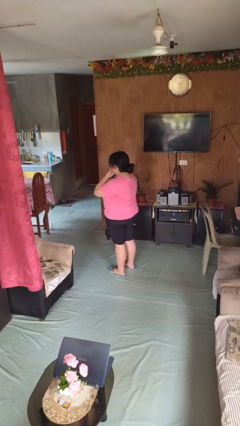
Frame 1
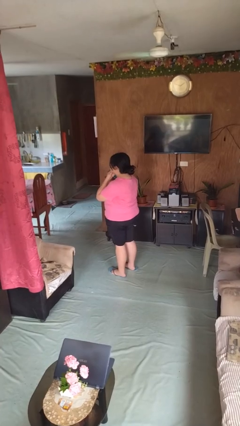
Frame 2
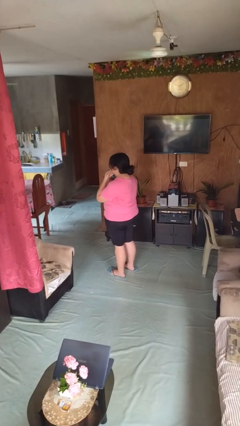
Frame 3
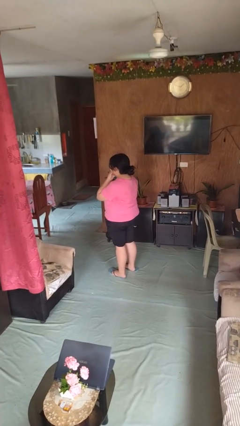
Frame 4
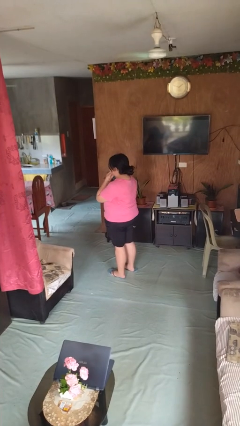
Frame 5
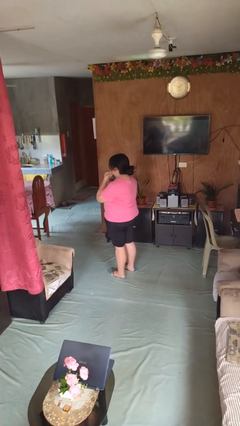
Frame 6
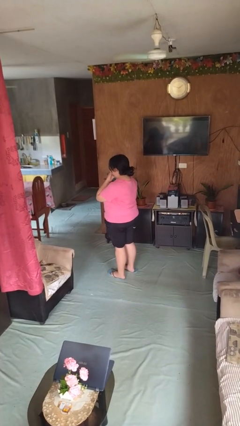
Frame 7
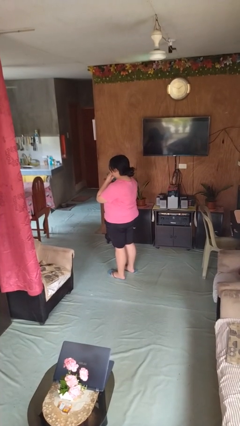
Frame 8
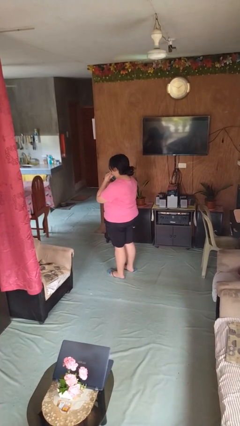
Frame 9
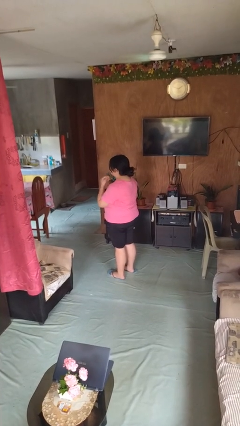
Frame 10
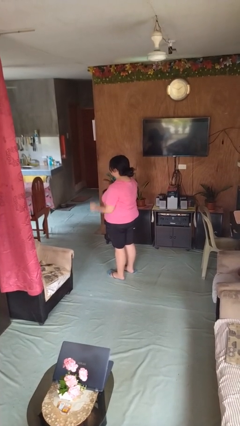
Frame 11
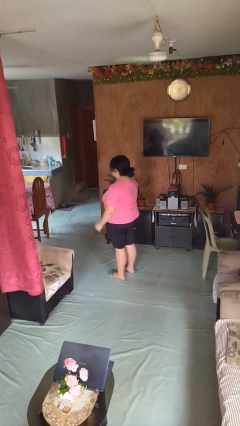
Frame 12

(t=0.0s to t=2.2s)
person strokes chin

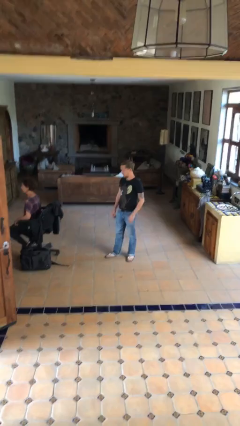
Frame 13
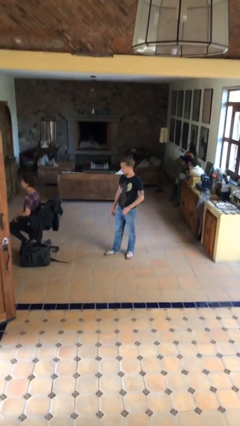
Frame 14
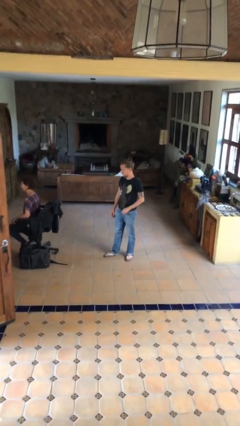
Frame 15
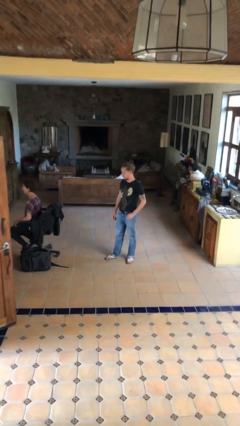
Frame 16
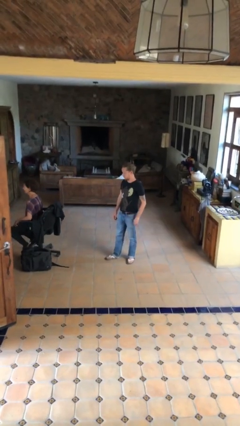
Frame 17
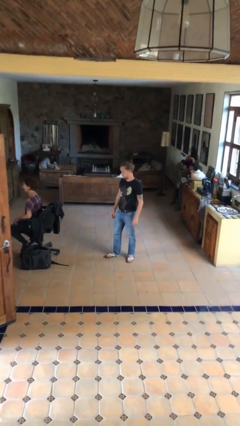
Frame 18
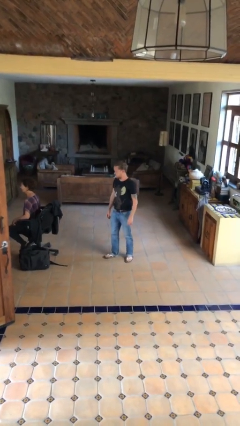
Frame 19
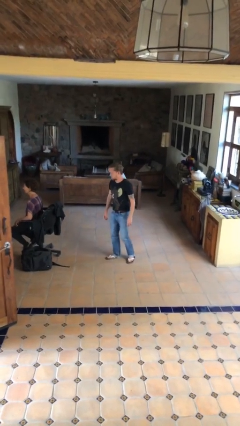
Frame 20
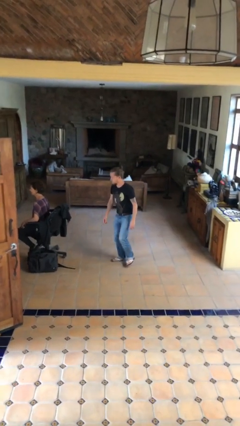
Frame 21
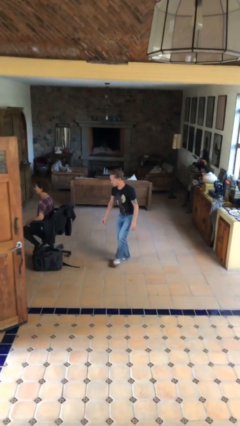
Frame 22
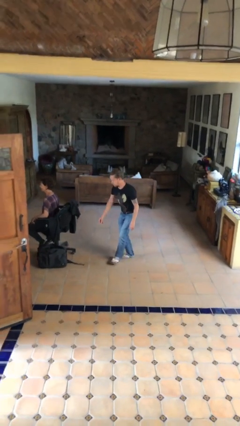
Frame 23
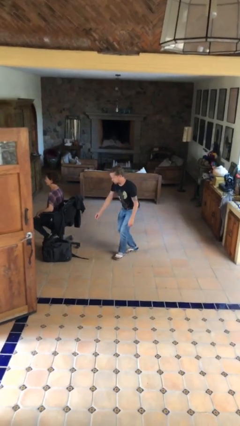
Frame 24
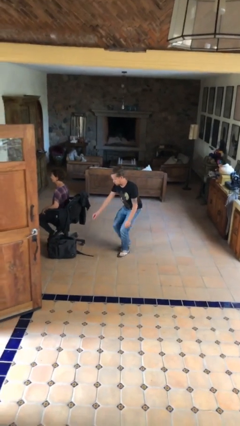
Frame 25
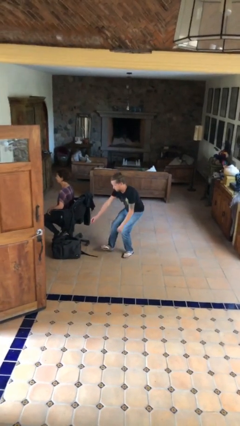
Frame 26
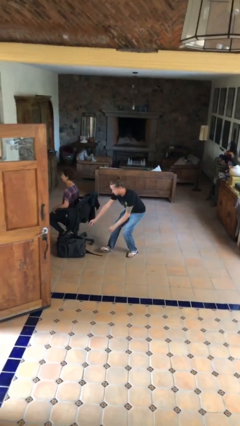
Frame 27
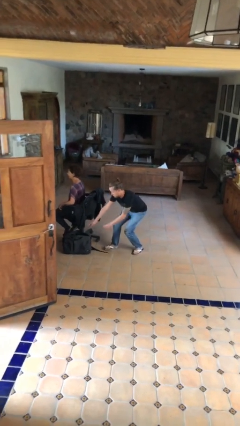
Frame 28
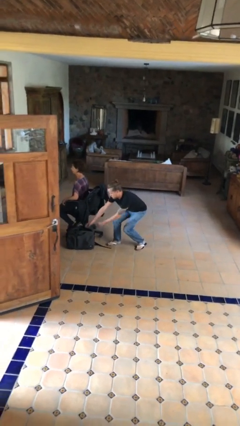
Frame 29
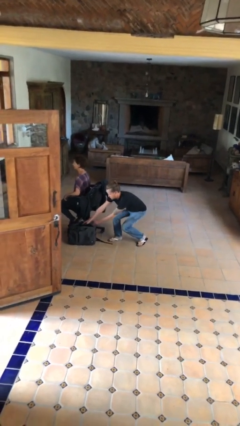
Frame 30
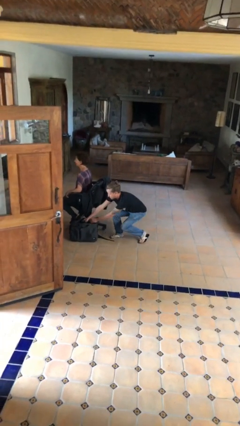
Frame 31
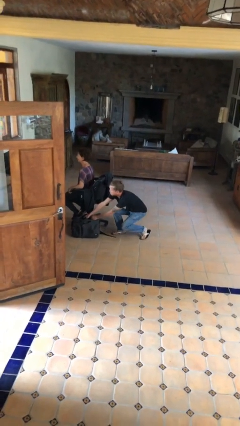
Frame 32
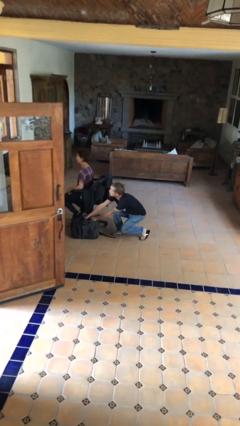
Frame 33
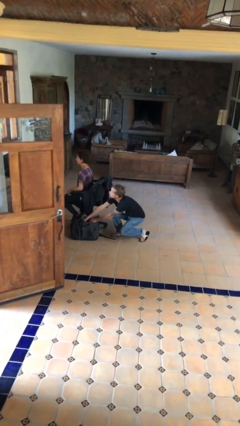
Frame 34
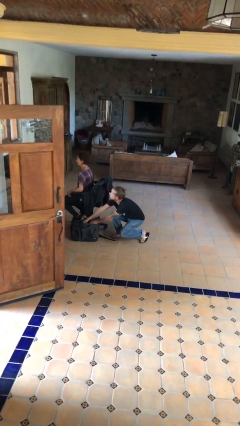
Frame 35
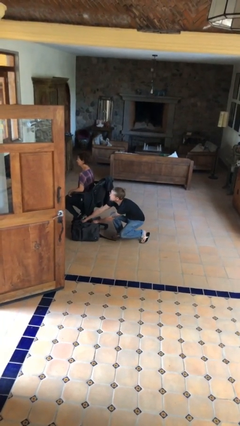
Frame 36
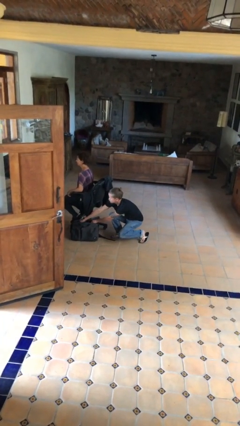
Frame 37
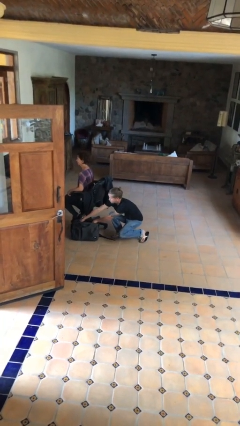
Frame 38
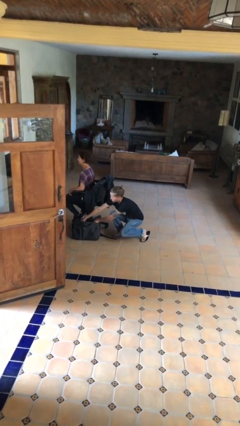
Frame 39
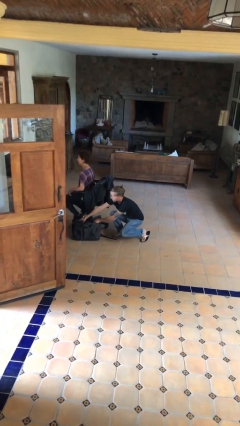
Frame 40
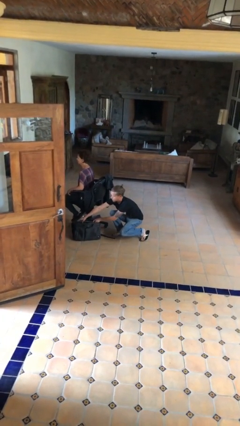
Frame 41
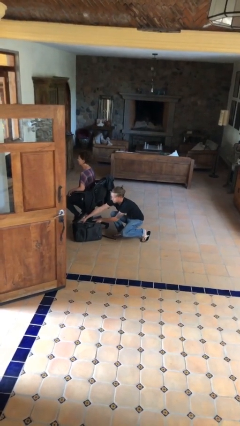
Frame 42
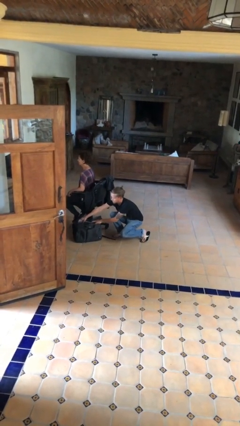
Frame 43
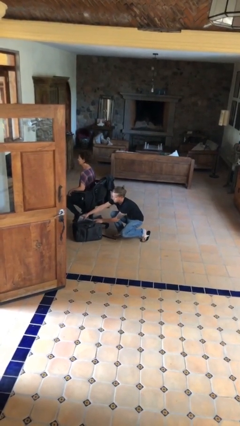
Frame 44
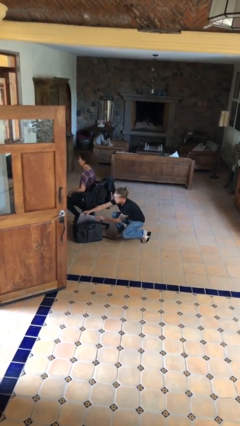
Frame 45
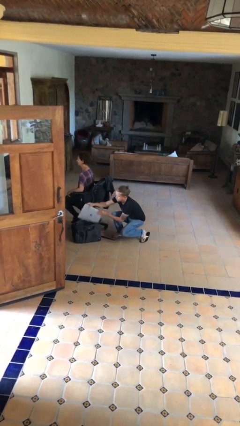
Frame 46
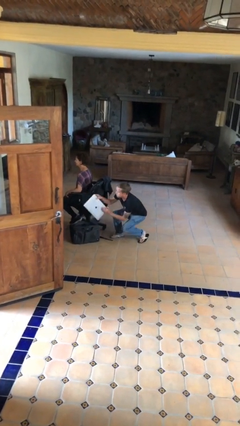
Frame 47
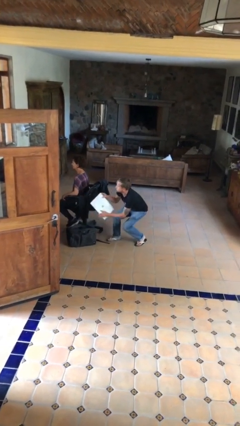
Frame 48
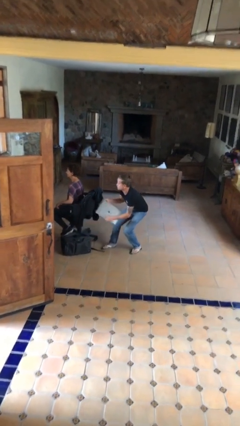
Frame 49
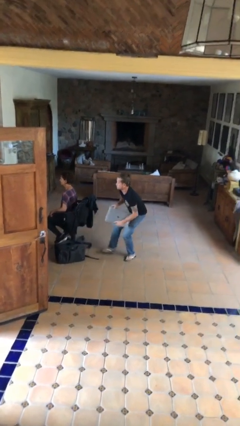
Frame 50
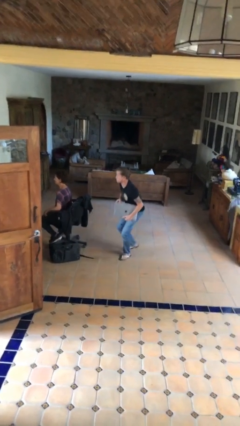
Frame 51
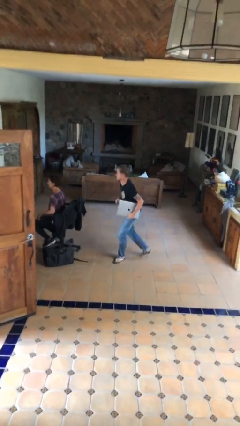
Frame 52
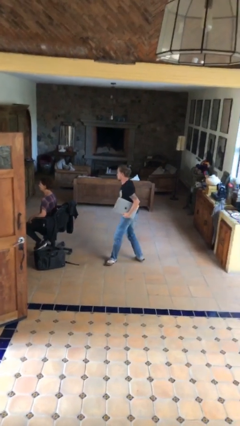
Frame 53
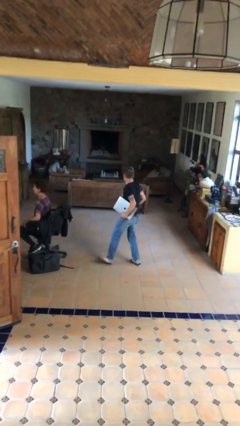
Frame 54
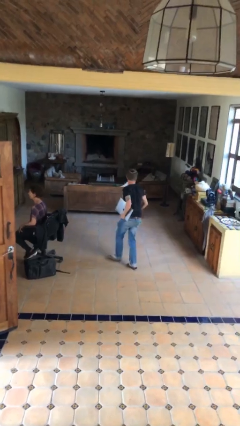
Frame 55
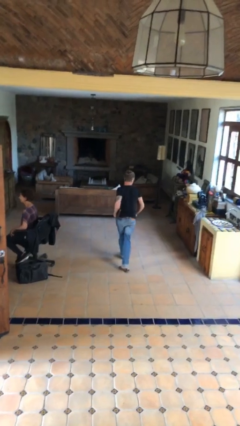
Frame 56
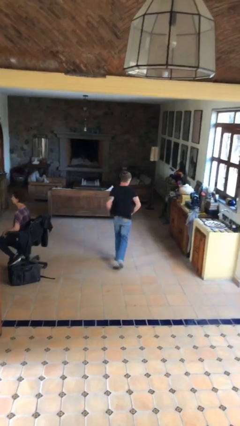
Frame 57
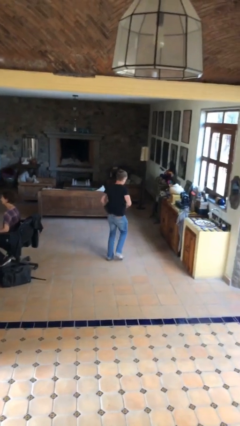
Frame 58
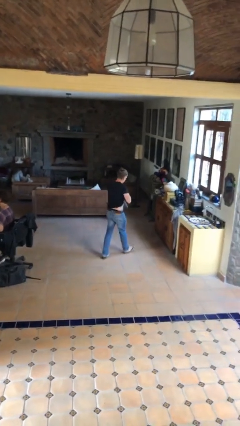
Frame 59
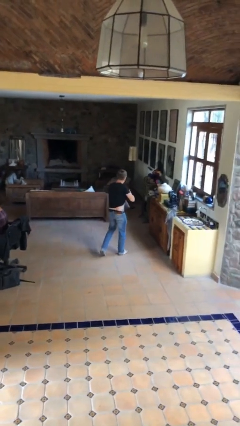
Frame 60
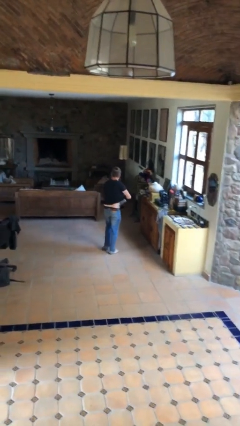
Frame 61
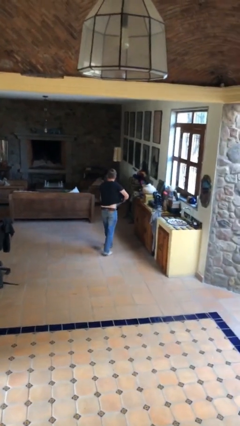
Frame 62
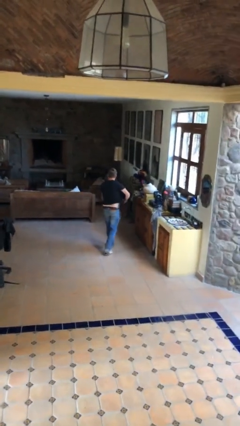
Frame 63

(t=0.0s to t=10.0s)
person steals object from person

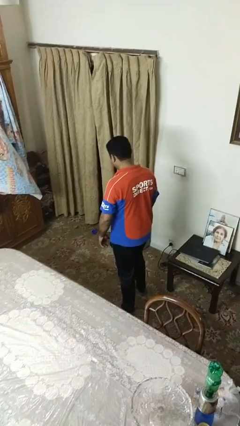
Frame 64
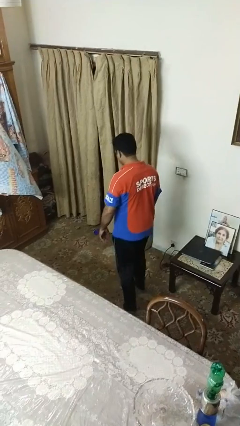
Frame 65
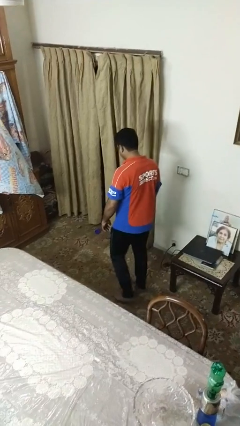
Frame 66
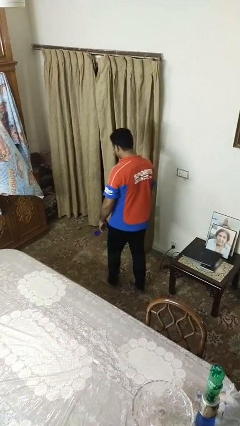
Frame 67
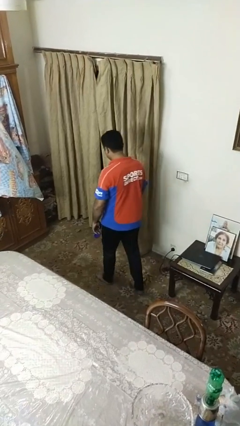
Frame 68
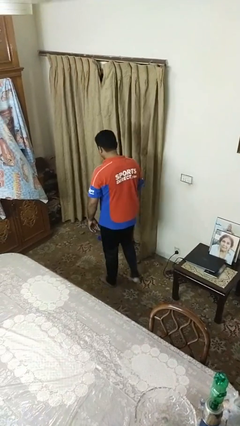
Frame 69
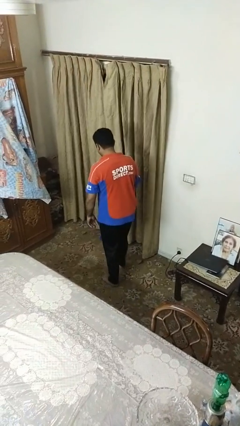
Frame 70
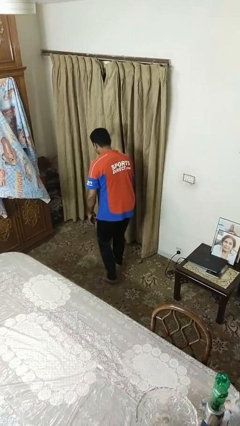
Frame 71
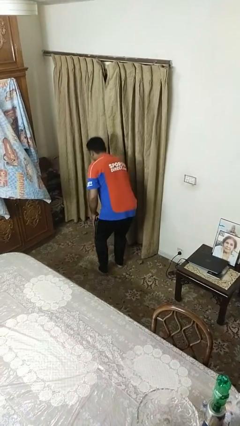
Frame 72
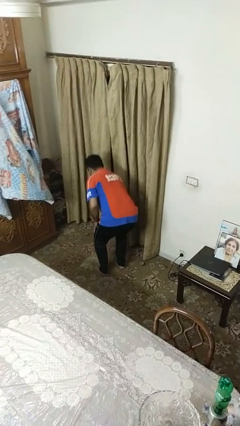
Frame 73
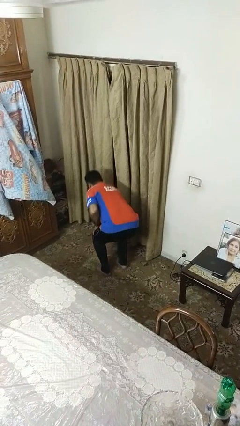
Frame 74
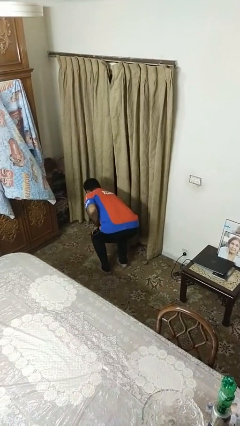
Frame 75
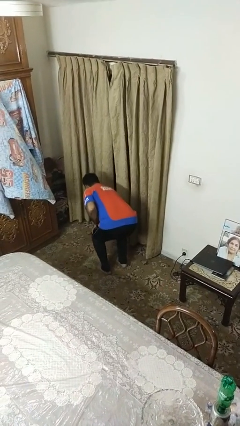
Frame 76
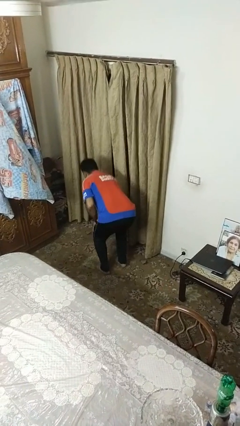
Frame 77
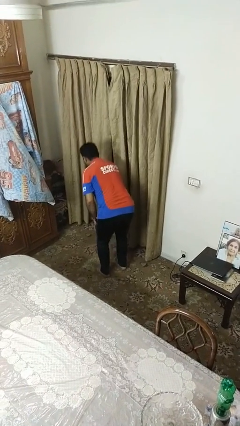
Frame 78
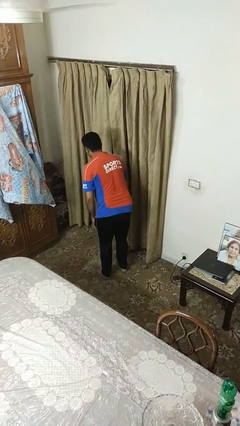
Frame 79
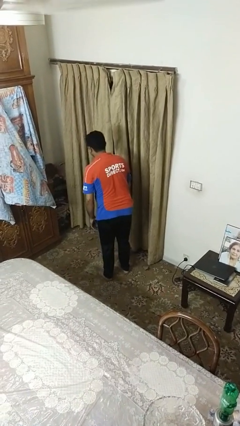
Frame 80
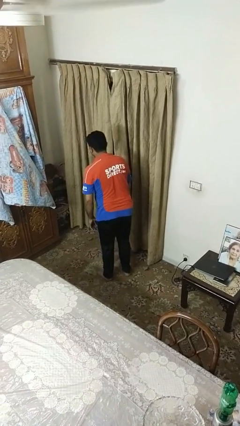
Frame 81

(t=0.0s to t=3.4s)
person picks up object from floor

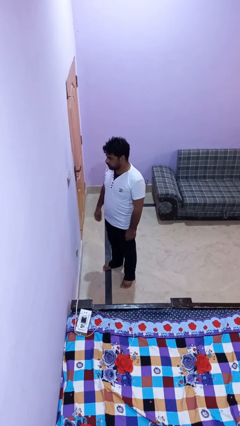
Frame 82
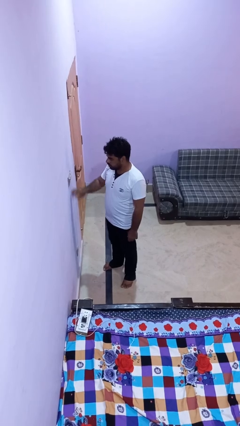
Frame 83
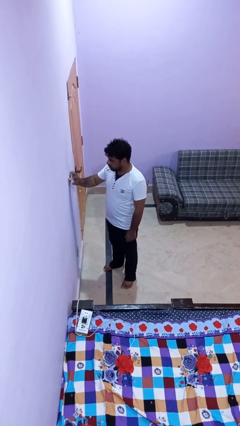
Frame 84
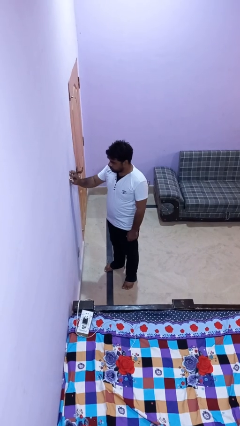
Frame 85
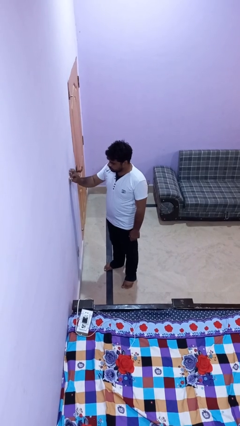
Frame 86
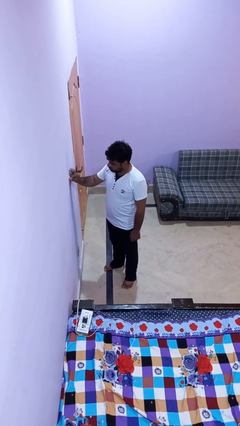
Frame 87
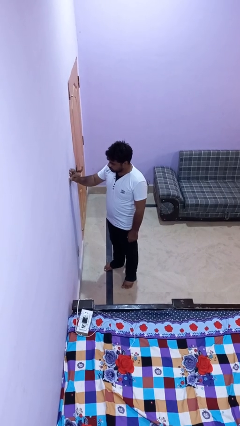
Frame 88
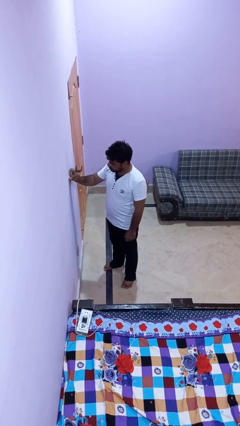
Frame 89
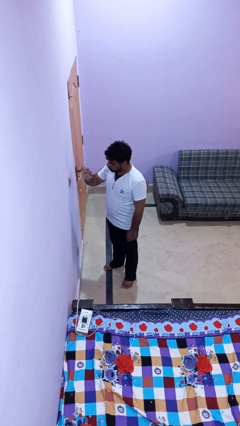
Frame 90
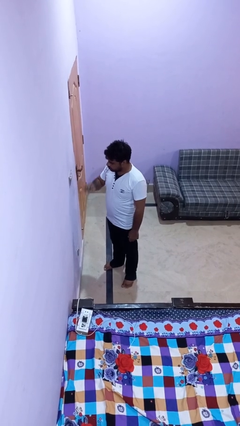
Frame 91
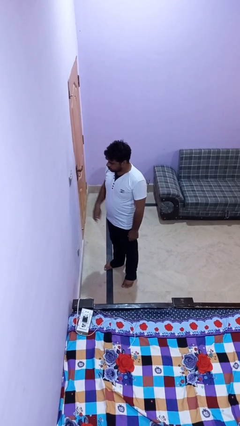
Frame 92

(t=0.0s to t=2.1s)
person adjusts thermostat

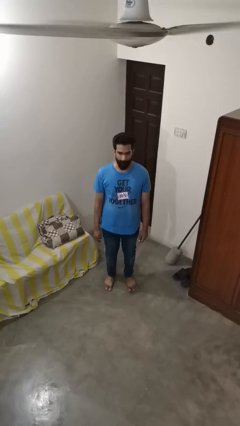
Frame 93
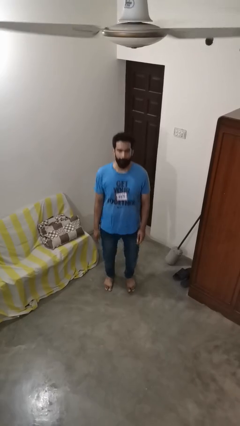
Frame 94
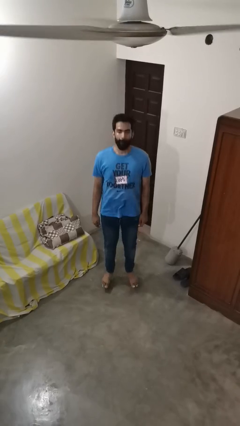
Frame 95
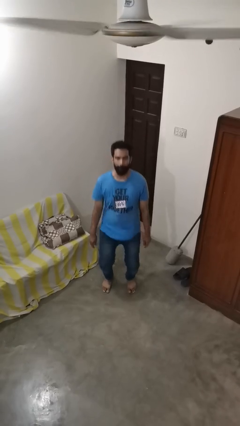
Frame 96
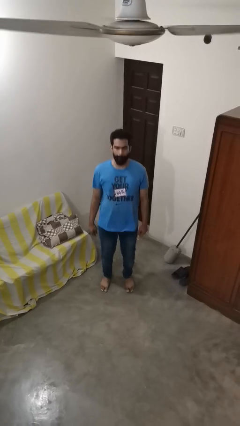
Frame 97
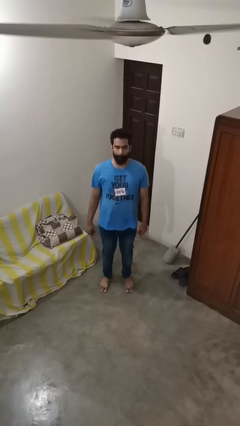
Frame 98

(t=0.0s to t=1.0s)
person jumps
